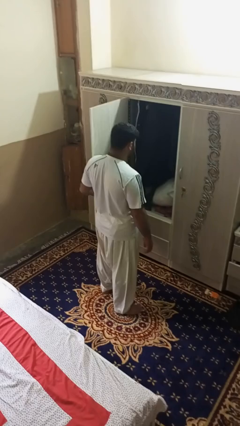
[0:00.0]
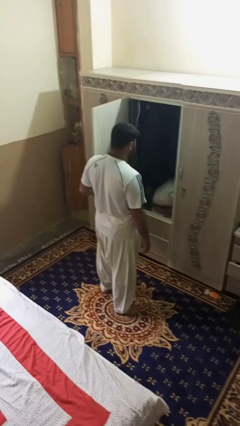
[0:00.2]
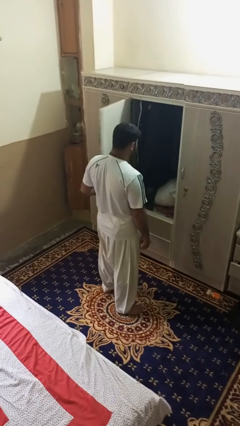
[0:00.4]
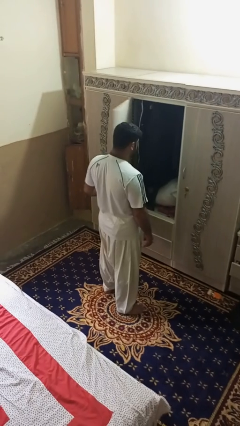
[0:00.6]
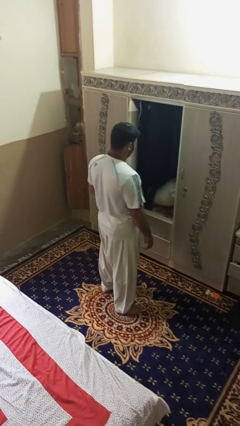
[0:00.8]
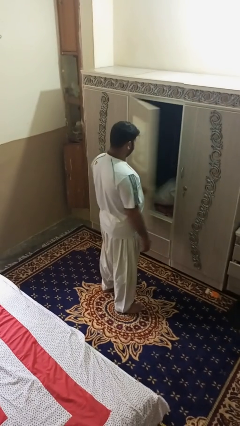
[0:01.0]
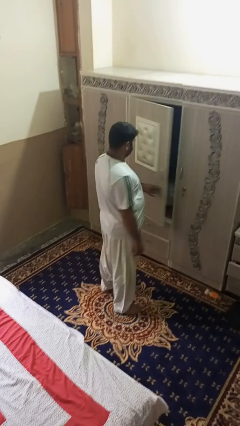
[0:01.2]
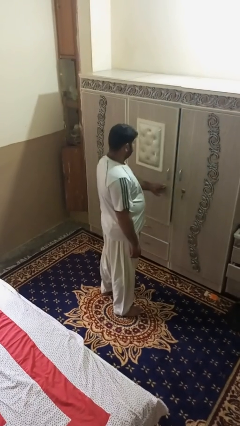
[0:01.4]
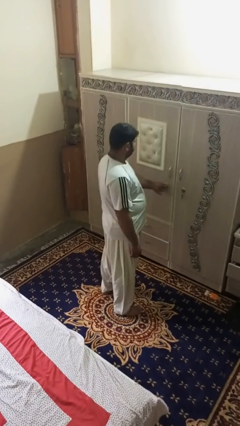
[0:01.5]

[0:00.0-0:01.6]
person closes dresser drawer

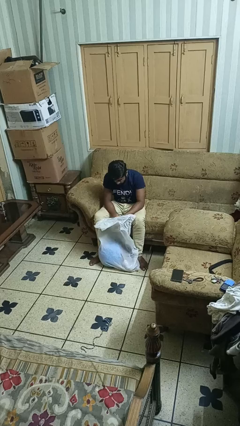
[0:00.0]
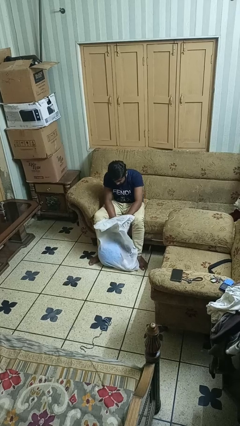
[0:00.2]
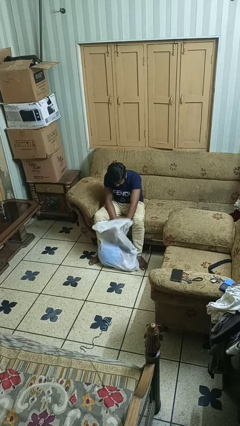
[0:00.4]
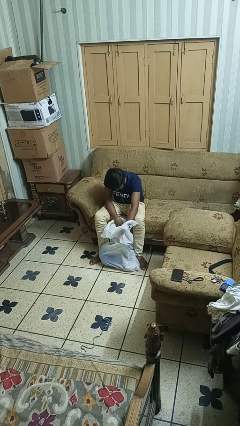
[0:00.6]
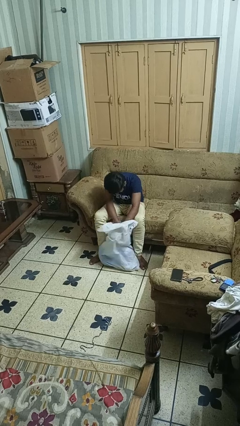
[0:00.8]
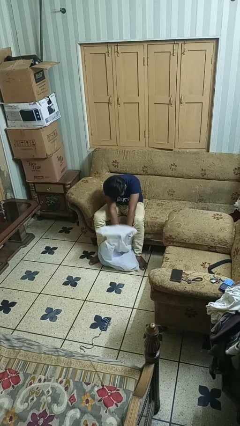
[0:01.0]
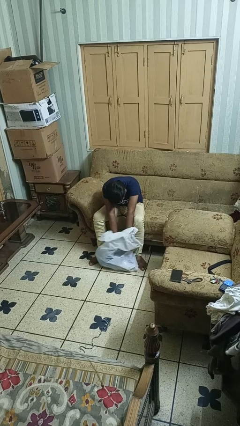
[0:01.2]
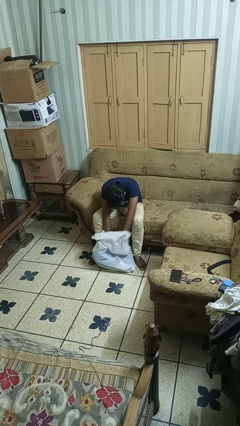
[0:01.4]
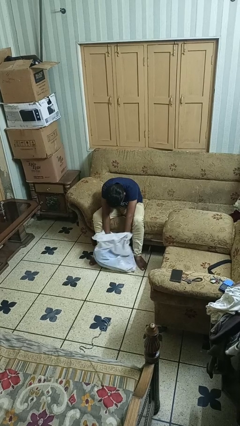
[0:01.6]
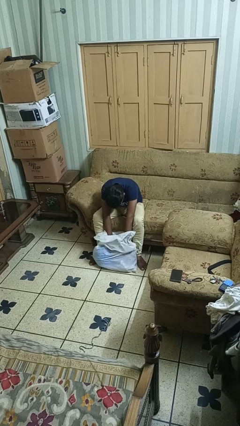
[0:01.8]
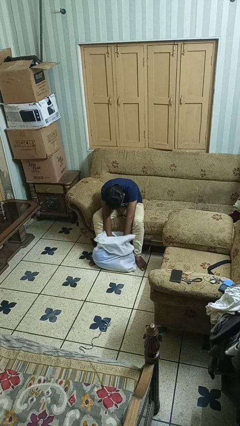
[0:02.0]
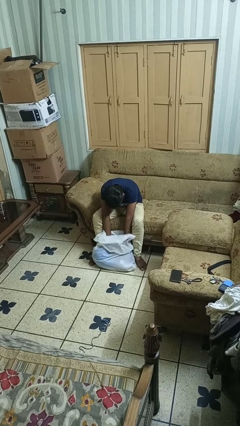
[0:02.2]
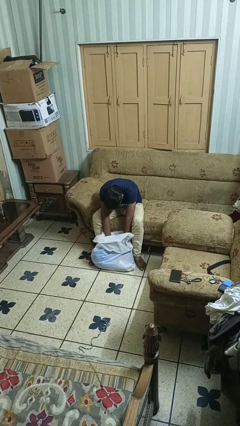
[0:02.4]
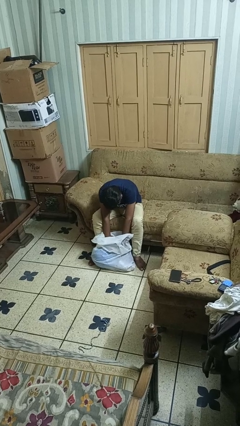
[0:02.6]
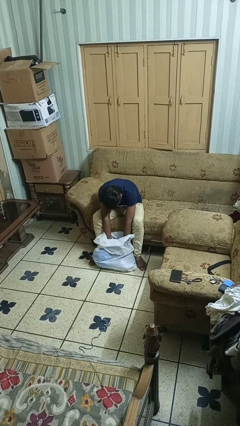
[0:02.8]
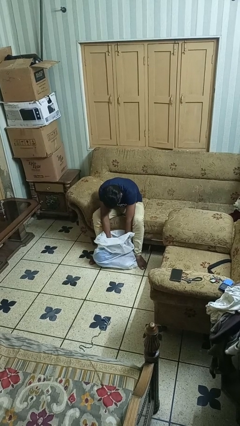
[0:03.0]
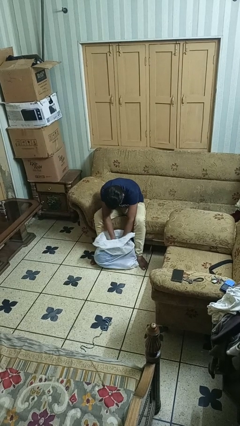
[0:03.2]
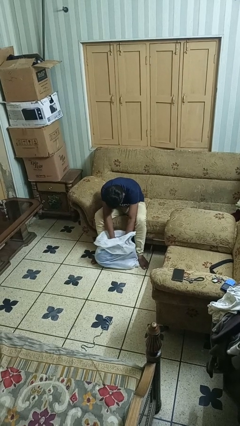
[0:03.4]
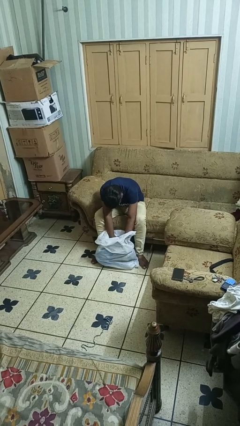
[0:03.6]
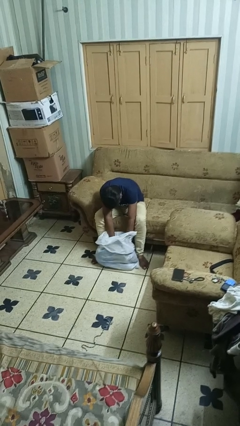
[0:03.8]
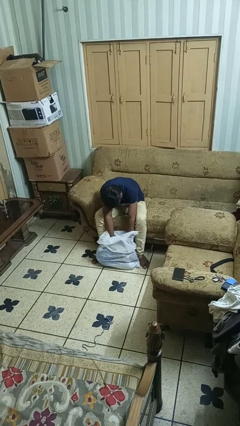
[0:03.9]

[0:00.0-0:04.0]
person searches in bag

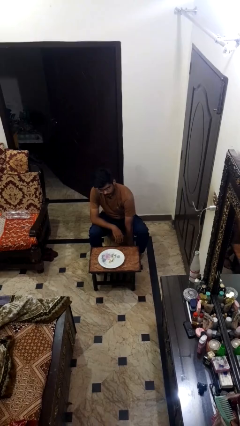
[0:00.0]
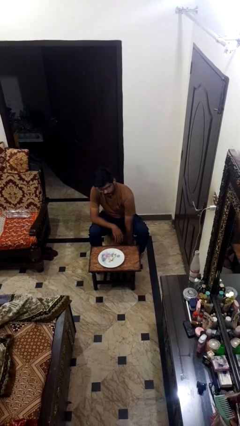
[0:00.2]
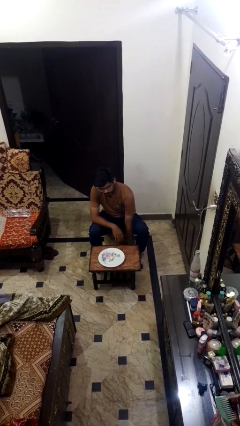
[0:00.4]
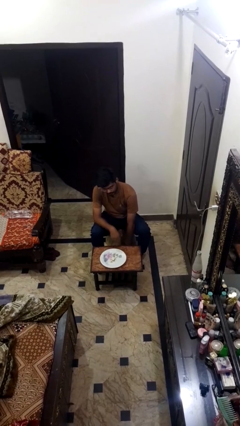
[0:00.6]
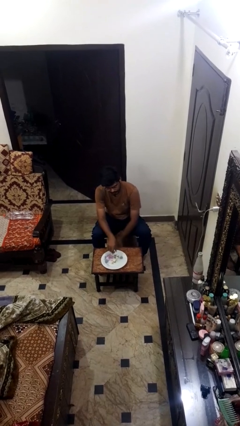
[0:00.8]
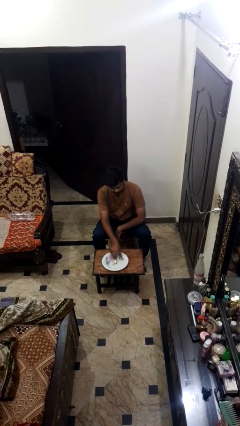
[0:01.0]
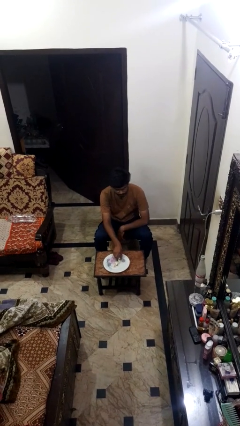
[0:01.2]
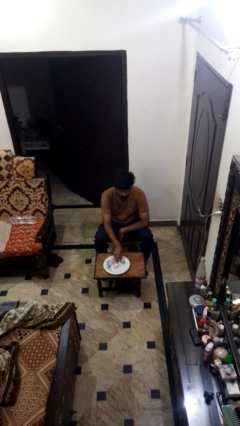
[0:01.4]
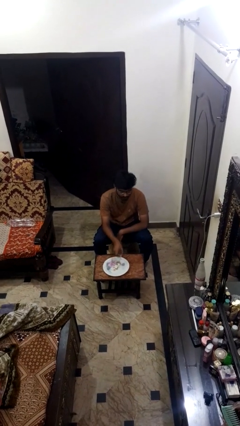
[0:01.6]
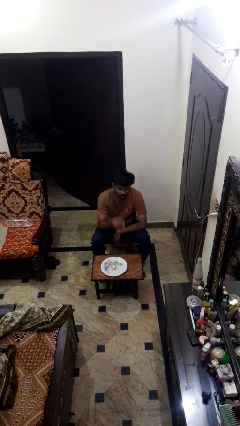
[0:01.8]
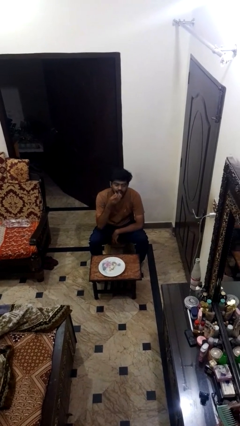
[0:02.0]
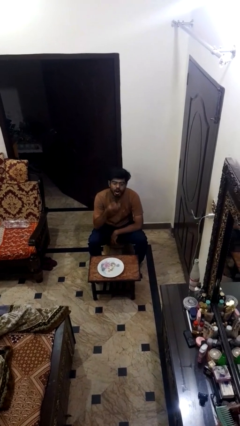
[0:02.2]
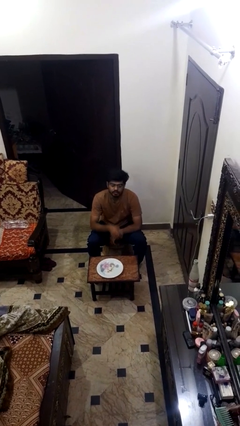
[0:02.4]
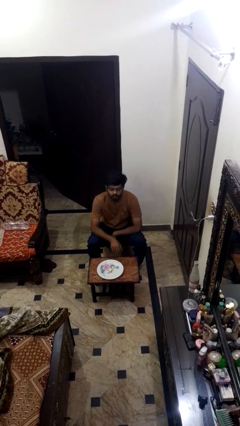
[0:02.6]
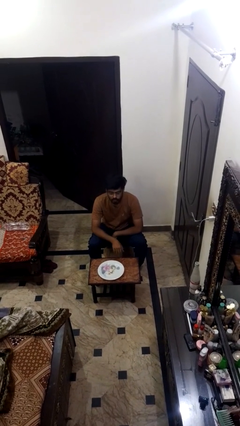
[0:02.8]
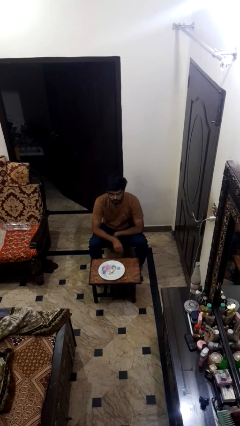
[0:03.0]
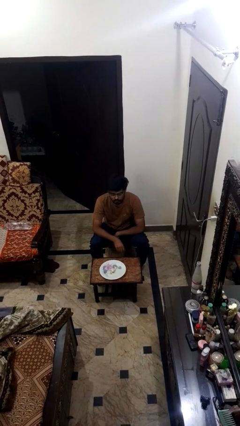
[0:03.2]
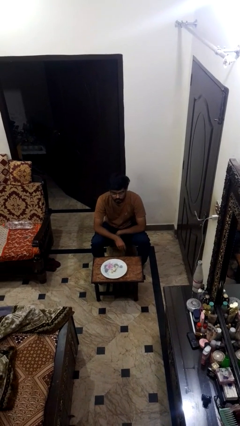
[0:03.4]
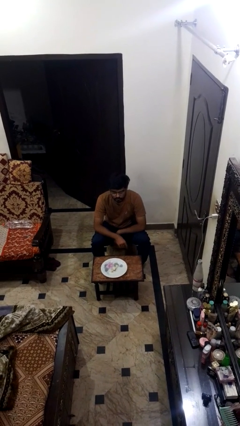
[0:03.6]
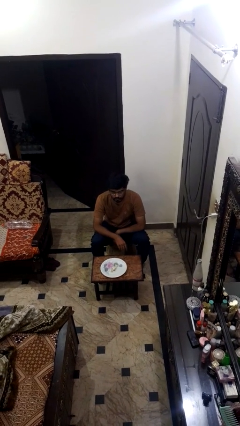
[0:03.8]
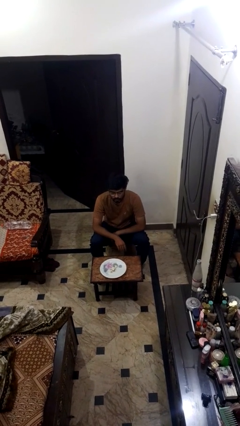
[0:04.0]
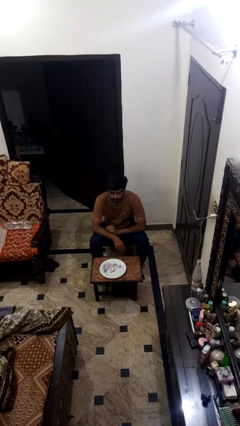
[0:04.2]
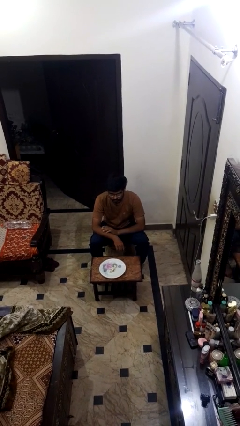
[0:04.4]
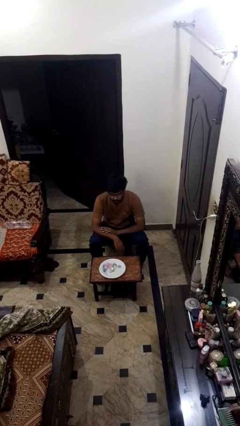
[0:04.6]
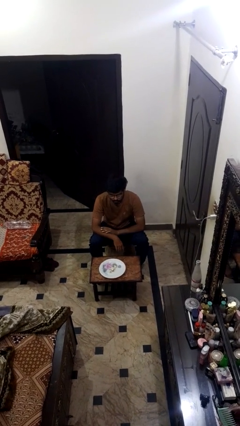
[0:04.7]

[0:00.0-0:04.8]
person eats with hands

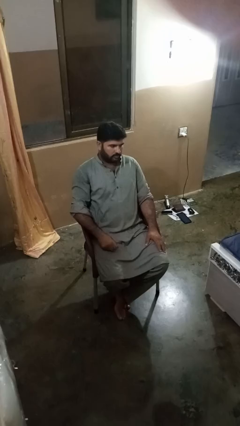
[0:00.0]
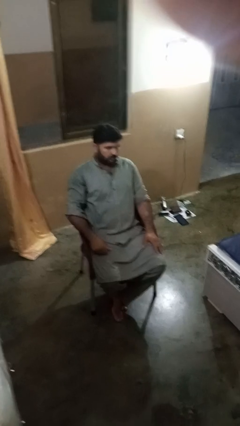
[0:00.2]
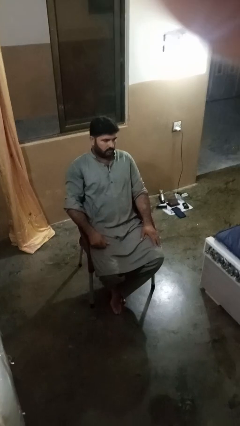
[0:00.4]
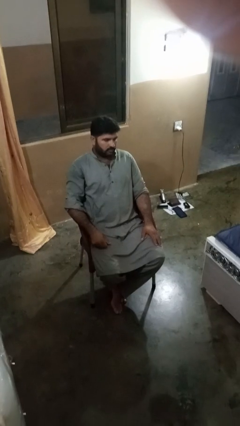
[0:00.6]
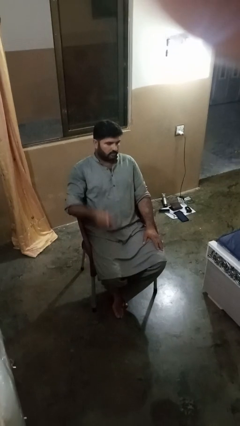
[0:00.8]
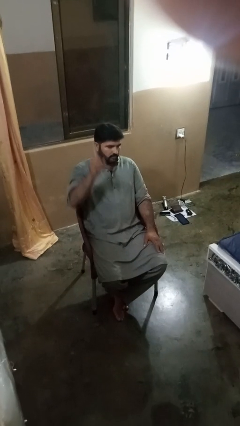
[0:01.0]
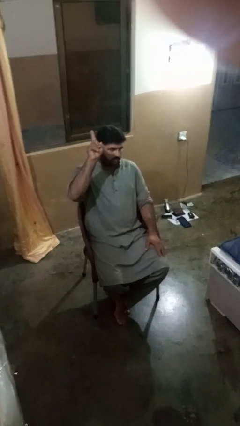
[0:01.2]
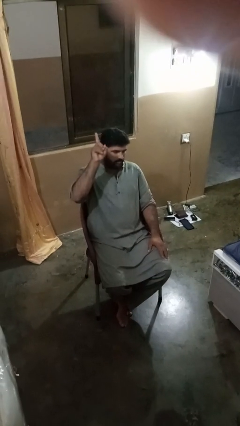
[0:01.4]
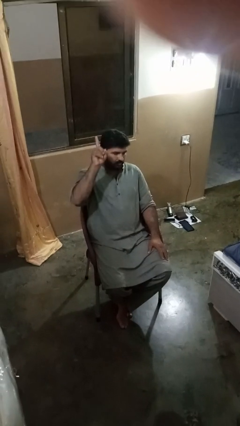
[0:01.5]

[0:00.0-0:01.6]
person gestures number one

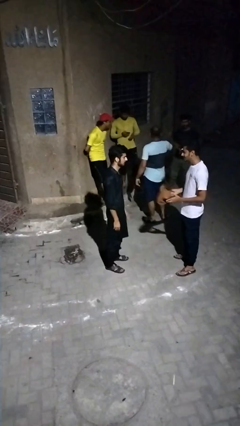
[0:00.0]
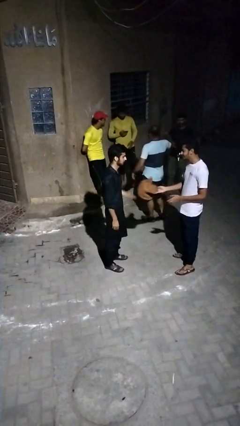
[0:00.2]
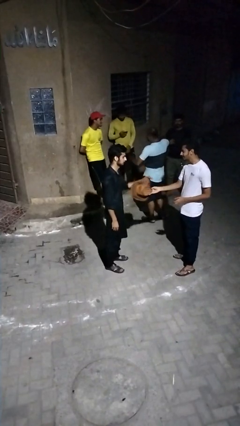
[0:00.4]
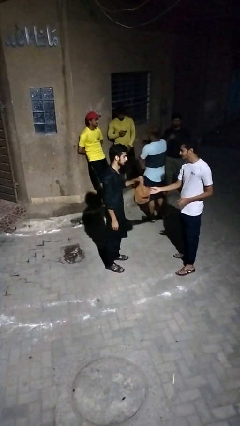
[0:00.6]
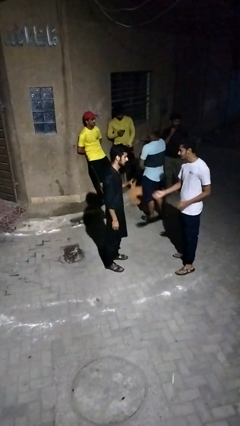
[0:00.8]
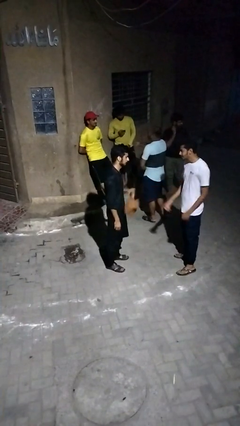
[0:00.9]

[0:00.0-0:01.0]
person transfers object to person

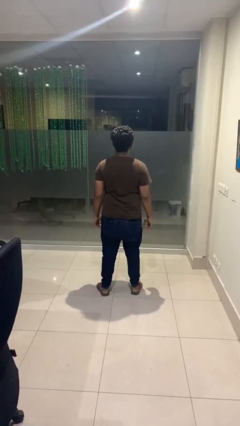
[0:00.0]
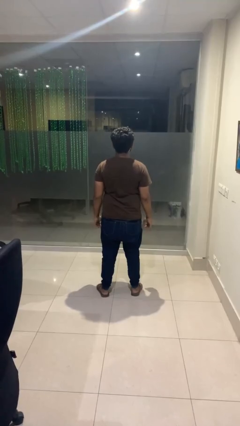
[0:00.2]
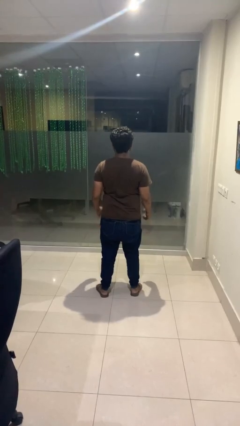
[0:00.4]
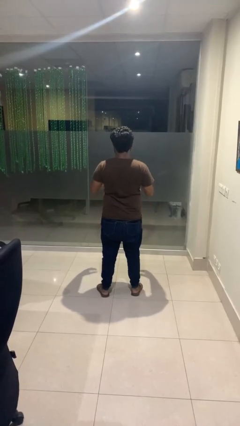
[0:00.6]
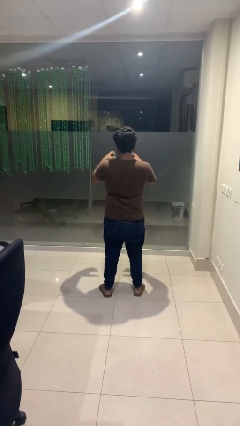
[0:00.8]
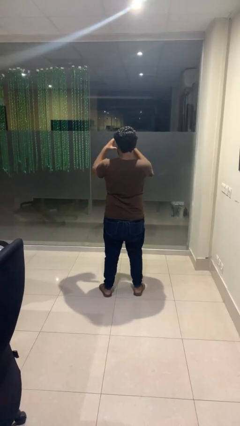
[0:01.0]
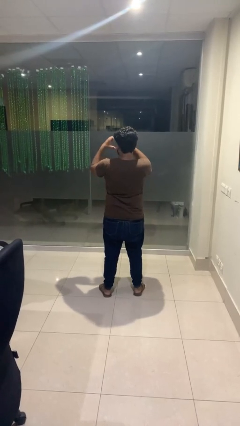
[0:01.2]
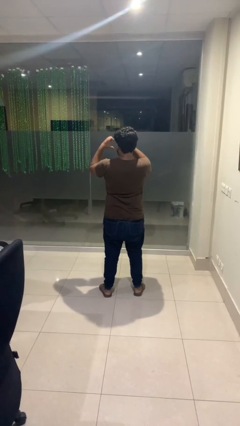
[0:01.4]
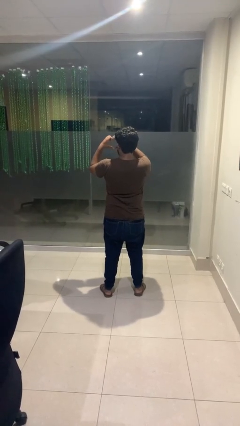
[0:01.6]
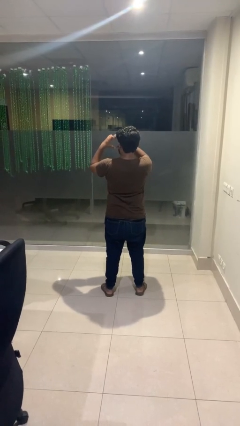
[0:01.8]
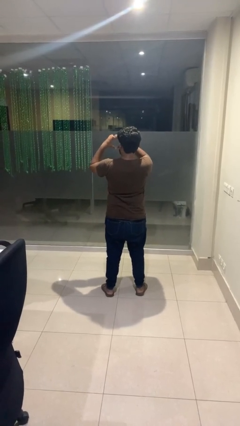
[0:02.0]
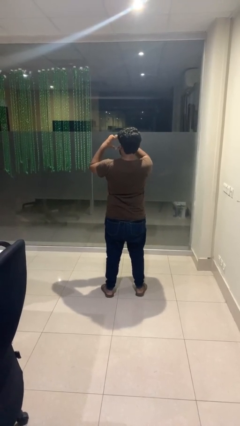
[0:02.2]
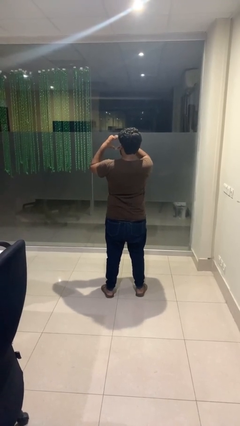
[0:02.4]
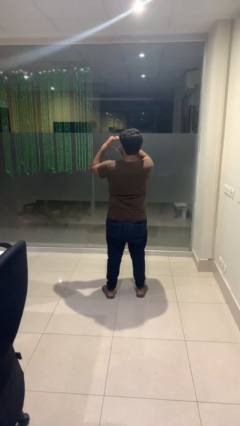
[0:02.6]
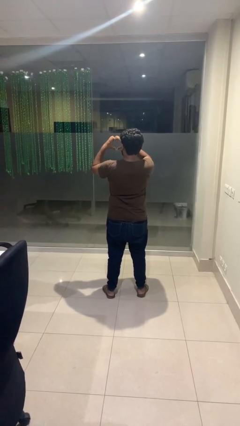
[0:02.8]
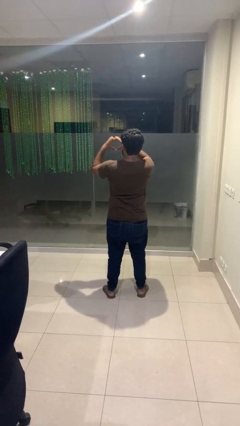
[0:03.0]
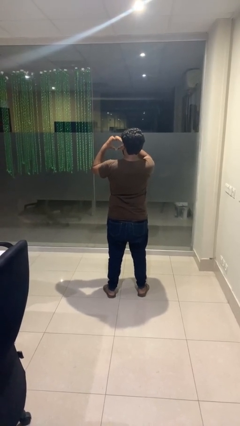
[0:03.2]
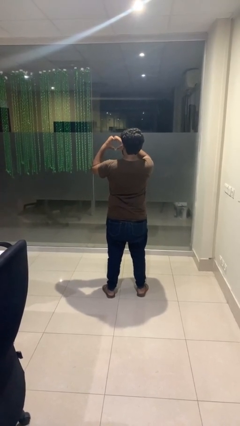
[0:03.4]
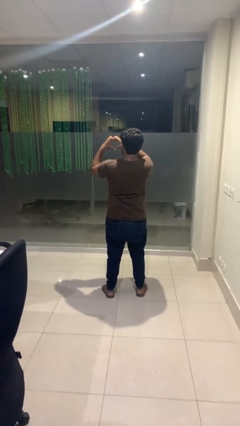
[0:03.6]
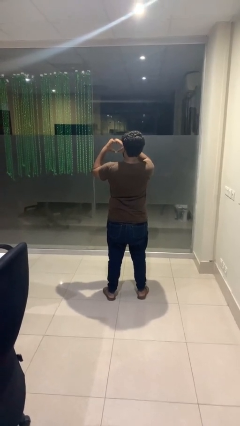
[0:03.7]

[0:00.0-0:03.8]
person gestures heart

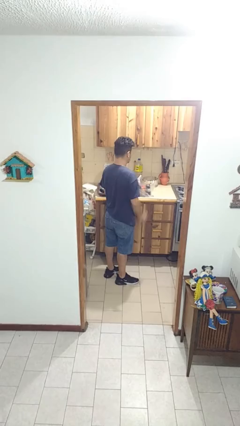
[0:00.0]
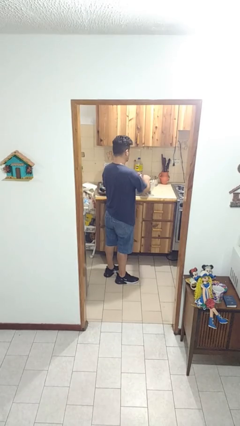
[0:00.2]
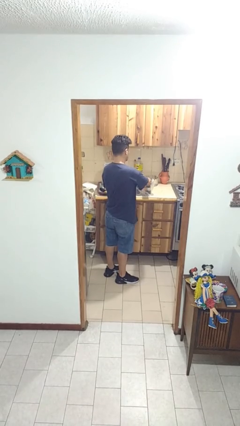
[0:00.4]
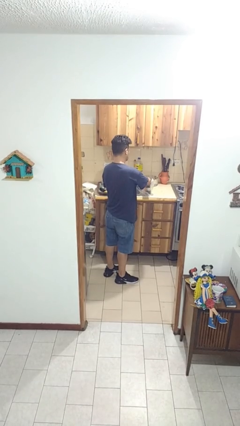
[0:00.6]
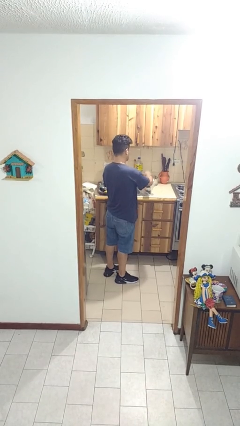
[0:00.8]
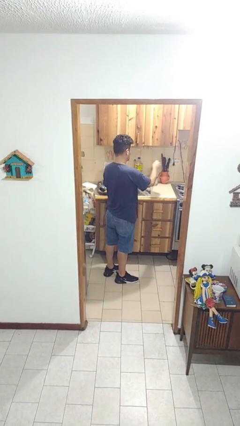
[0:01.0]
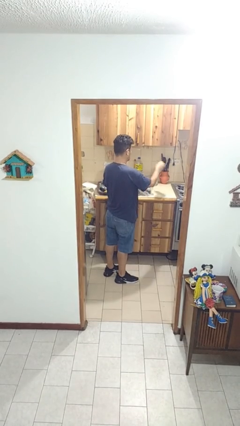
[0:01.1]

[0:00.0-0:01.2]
person takes object from bag
